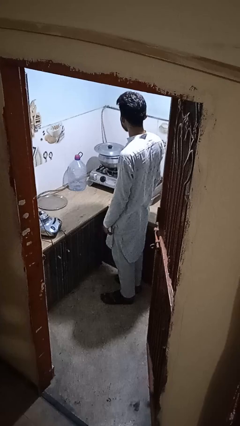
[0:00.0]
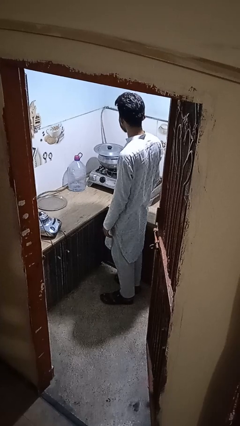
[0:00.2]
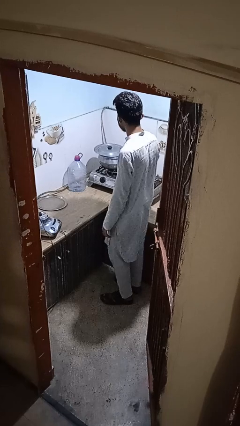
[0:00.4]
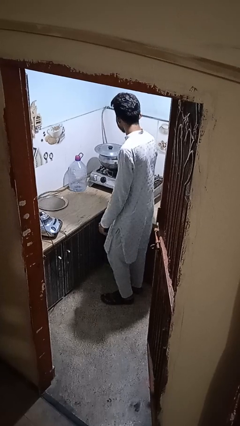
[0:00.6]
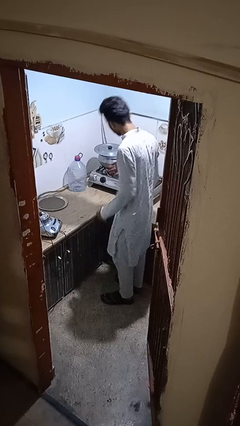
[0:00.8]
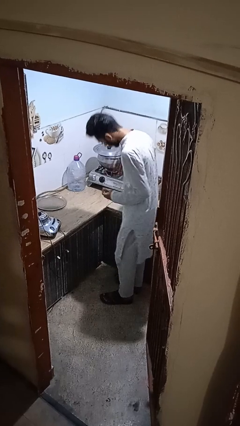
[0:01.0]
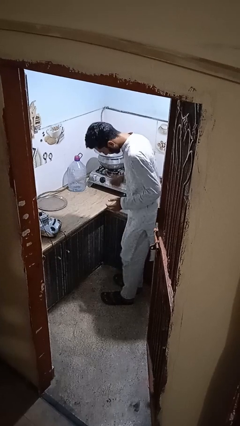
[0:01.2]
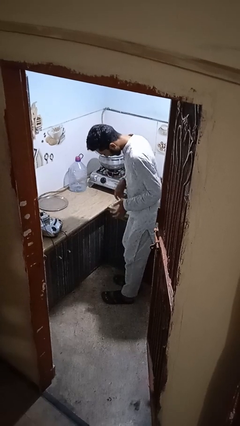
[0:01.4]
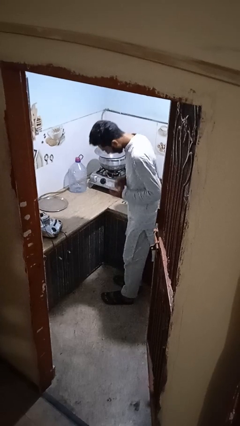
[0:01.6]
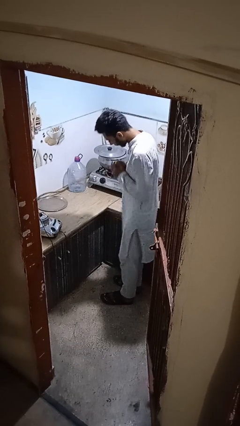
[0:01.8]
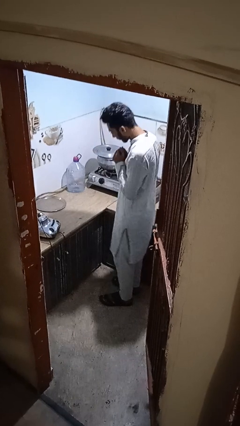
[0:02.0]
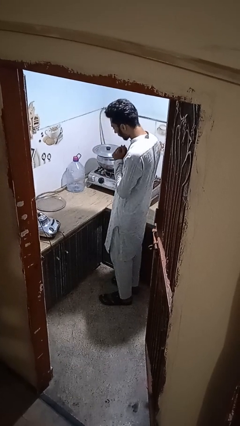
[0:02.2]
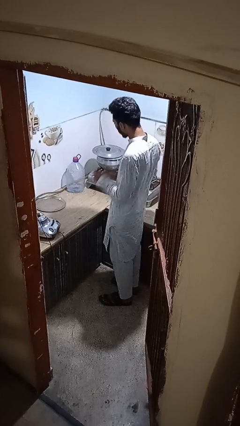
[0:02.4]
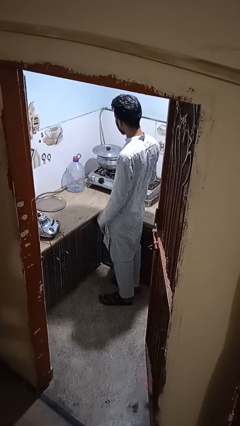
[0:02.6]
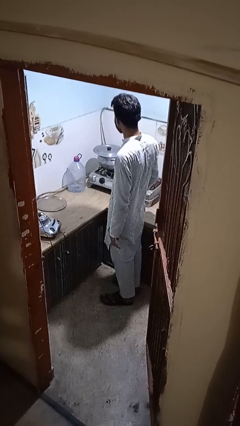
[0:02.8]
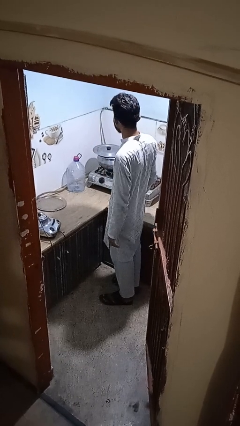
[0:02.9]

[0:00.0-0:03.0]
person burns hand

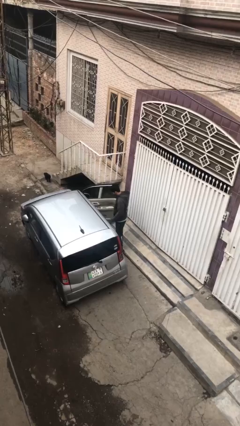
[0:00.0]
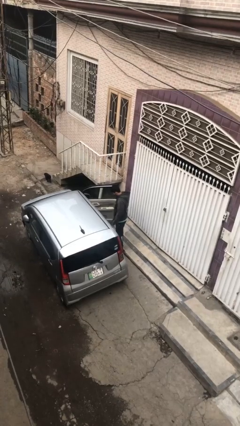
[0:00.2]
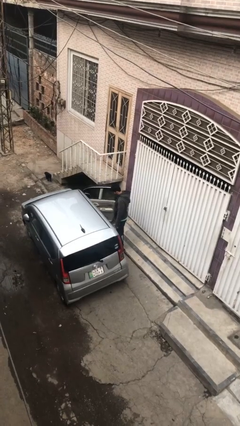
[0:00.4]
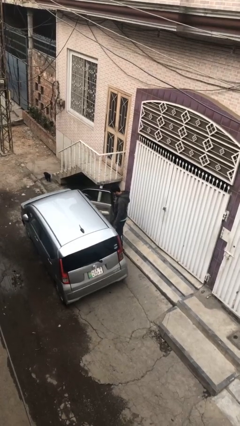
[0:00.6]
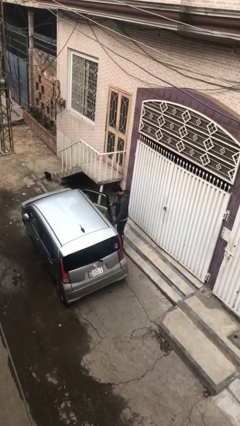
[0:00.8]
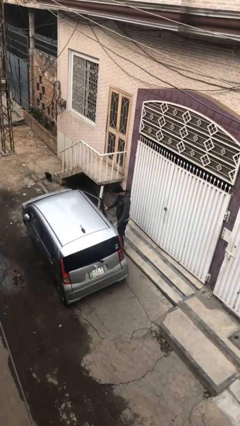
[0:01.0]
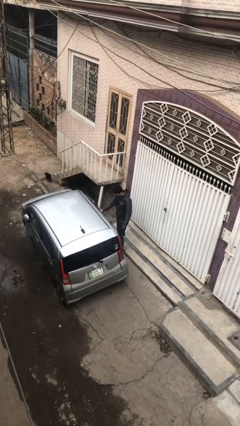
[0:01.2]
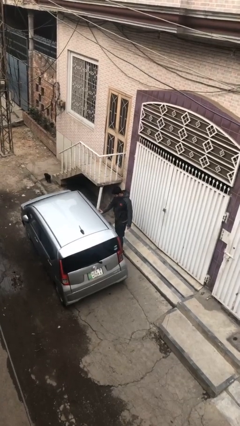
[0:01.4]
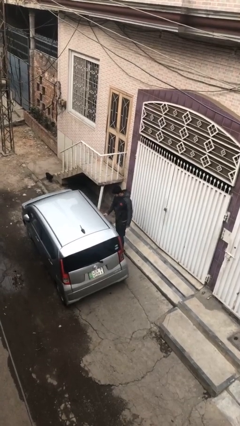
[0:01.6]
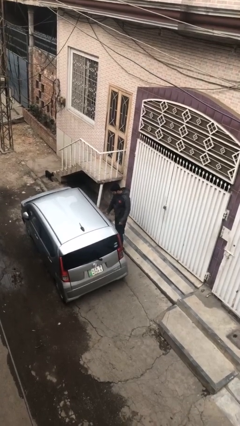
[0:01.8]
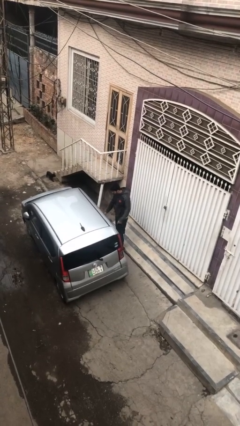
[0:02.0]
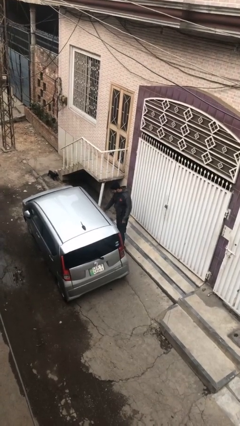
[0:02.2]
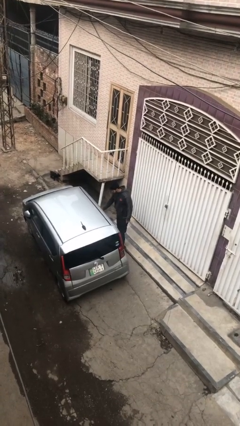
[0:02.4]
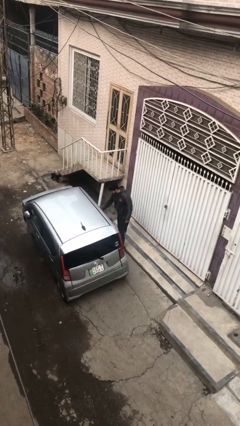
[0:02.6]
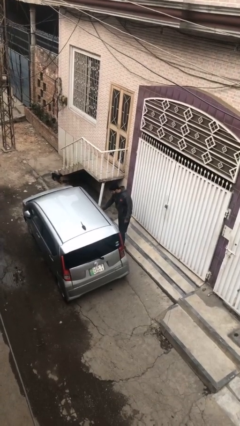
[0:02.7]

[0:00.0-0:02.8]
person closes car door

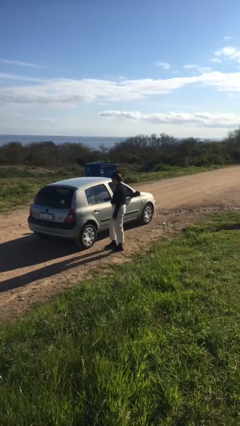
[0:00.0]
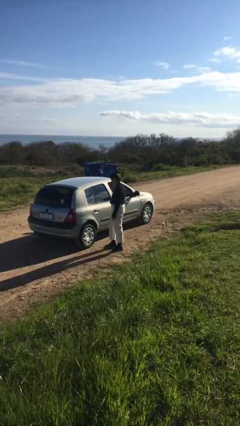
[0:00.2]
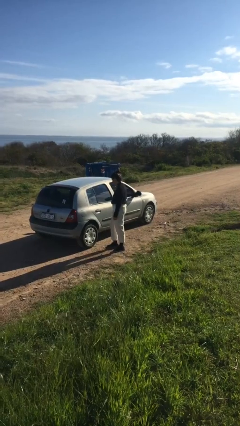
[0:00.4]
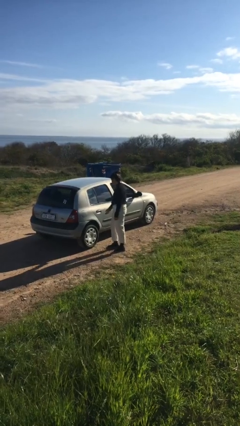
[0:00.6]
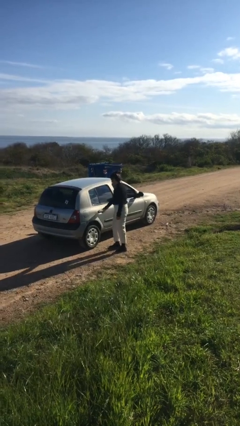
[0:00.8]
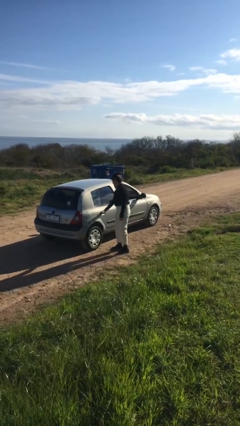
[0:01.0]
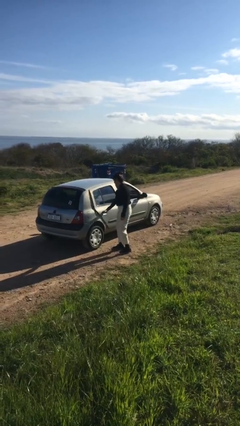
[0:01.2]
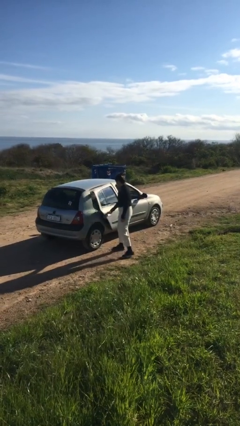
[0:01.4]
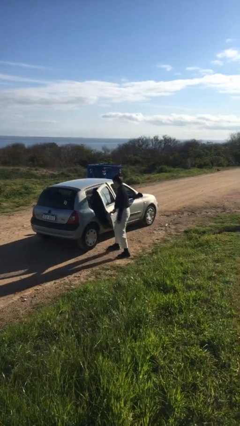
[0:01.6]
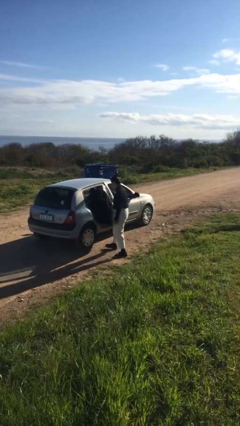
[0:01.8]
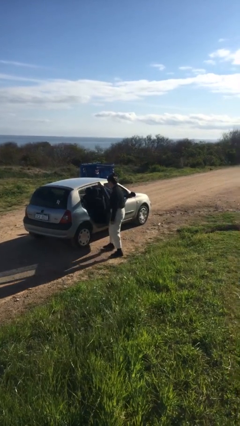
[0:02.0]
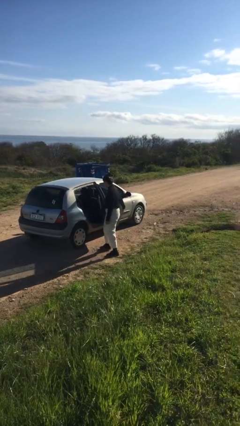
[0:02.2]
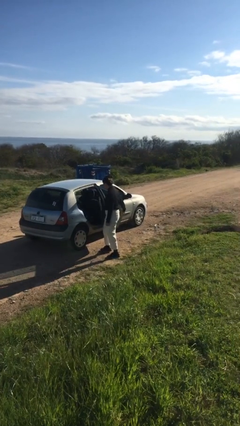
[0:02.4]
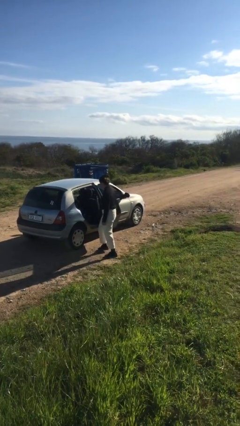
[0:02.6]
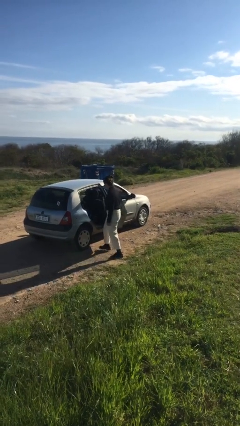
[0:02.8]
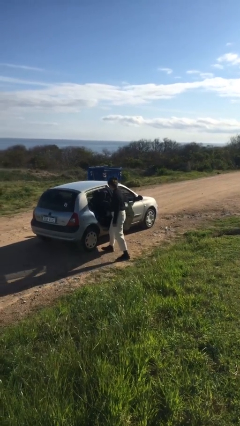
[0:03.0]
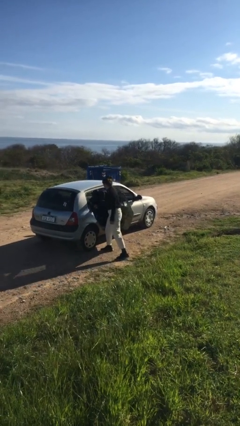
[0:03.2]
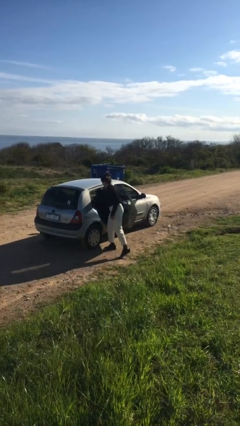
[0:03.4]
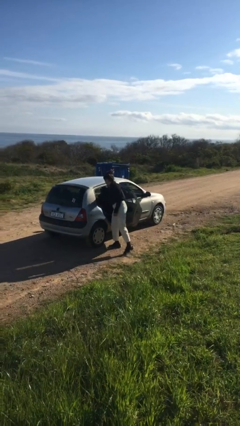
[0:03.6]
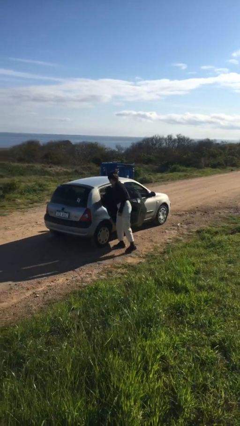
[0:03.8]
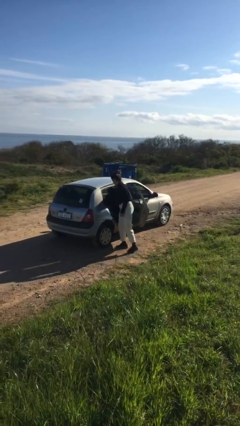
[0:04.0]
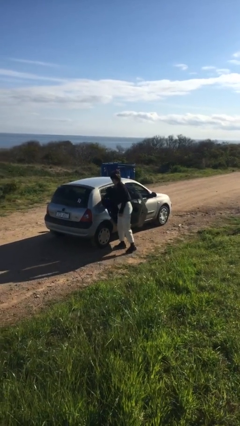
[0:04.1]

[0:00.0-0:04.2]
person opens car door

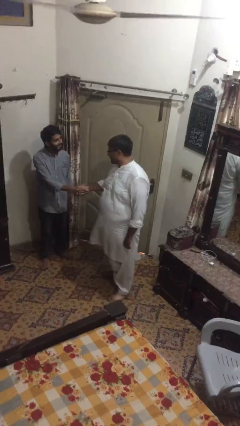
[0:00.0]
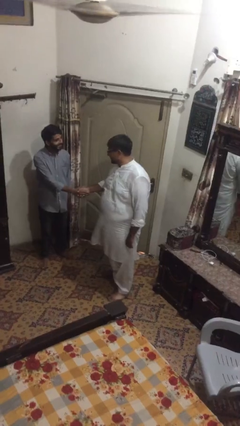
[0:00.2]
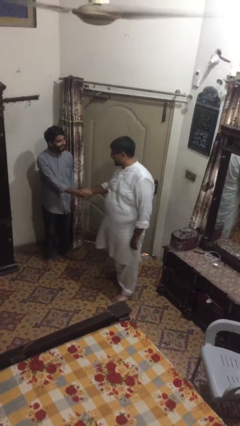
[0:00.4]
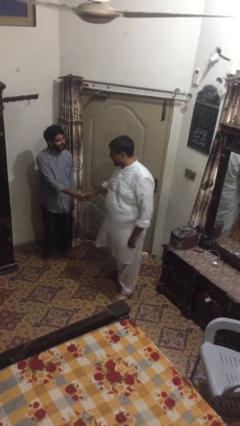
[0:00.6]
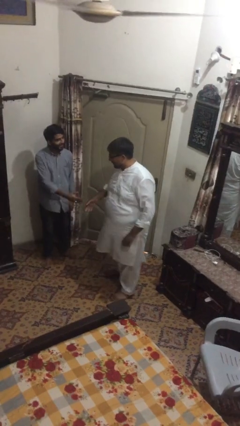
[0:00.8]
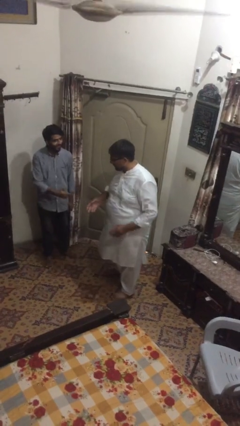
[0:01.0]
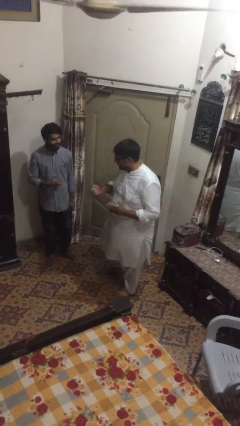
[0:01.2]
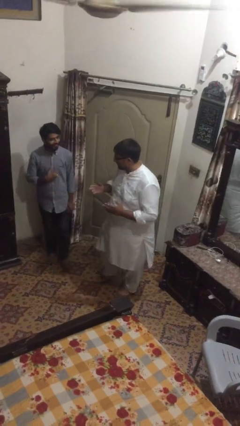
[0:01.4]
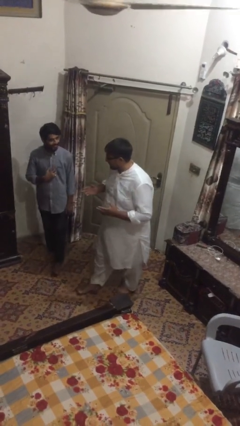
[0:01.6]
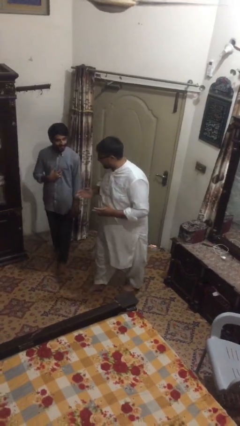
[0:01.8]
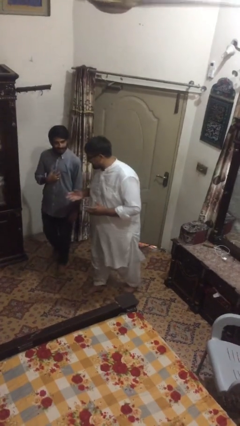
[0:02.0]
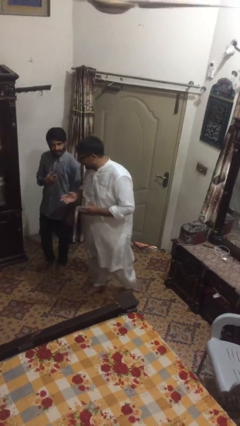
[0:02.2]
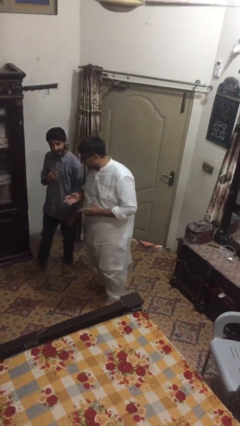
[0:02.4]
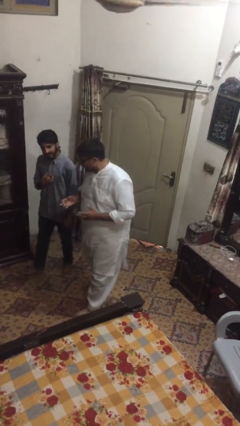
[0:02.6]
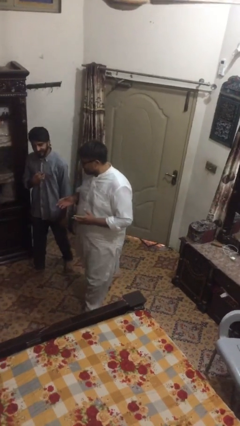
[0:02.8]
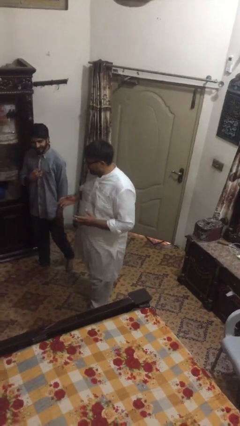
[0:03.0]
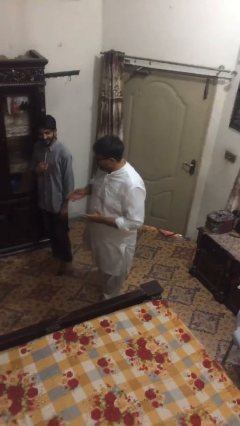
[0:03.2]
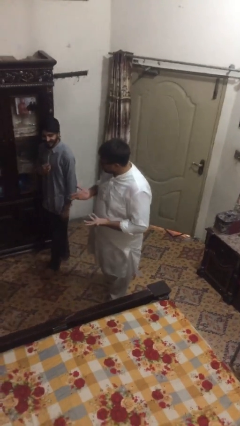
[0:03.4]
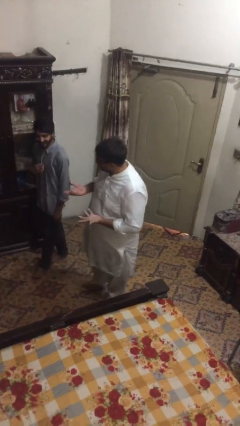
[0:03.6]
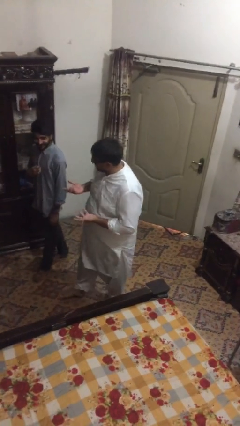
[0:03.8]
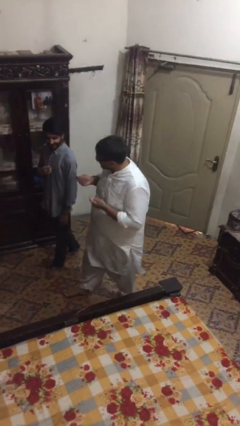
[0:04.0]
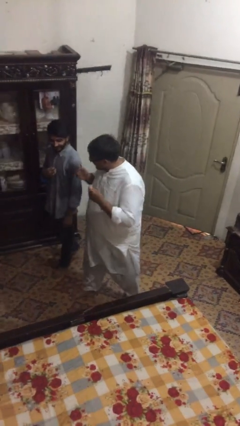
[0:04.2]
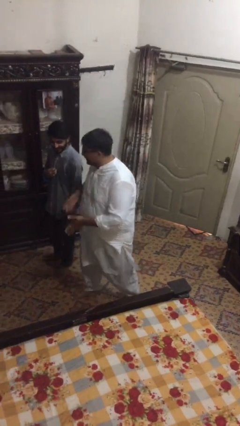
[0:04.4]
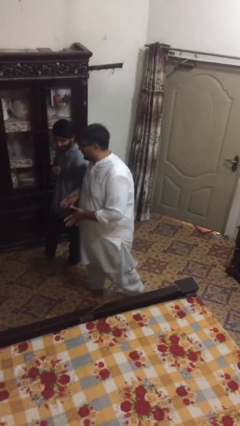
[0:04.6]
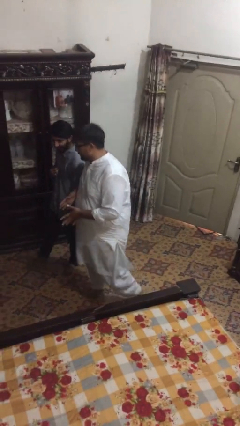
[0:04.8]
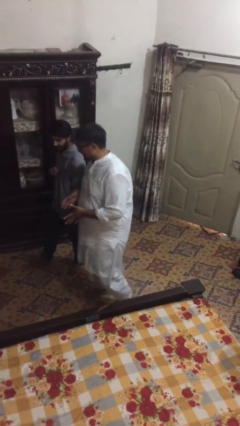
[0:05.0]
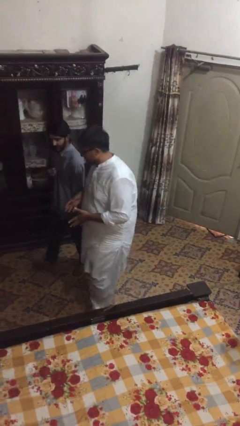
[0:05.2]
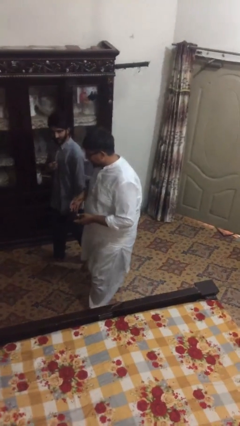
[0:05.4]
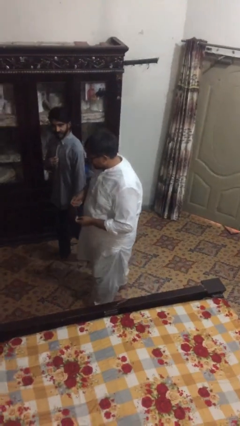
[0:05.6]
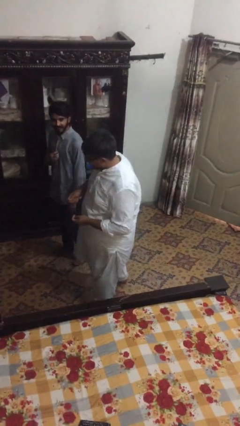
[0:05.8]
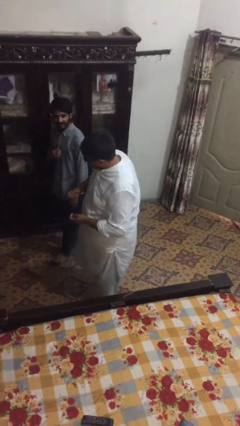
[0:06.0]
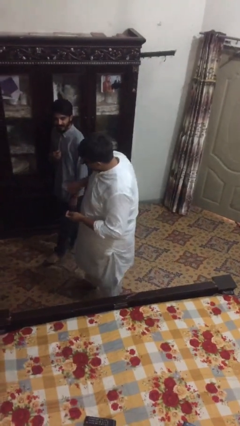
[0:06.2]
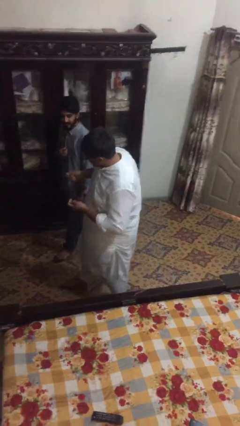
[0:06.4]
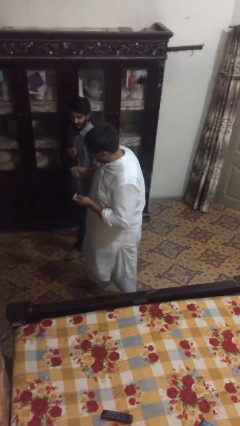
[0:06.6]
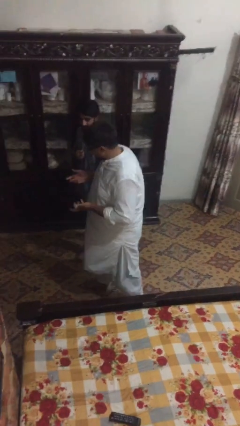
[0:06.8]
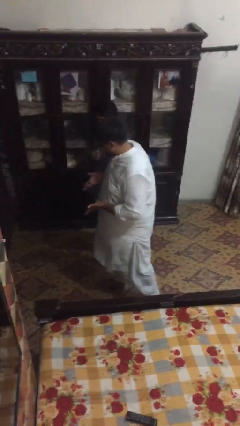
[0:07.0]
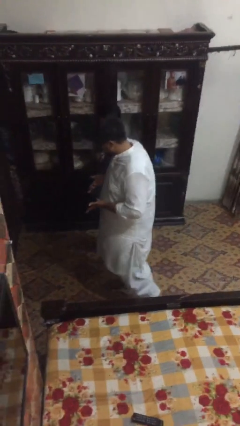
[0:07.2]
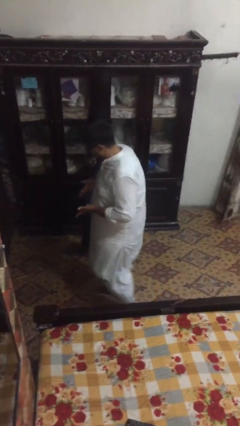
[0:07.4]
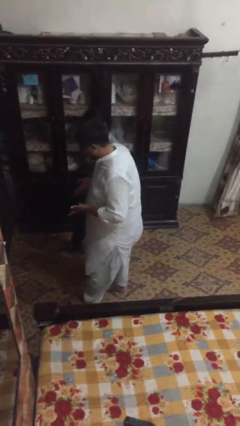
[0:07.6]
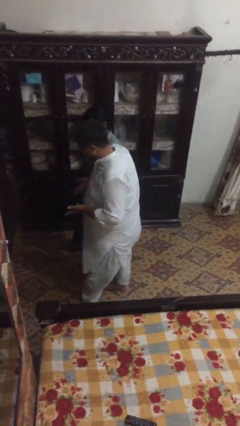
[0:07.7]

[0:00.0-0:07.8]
person talks to person
